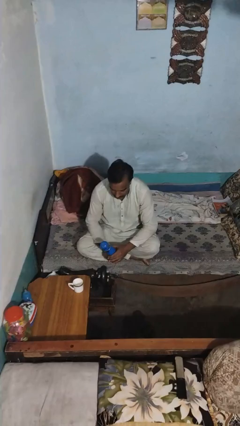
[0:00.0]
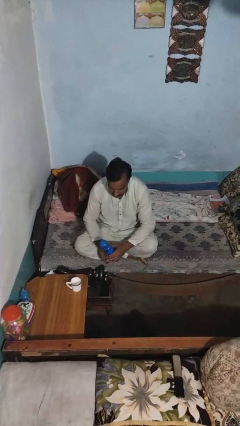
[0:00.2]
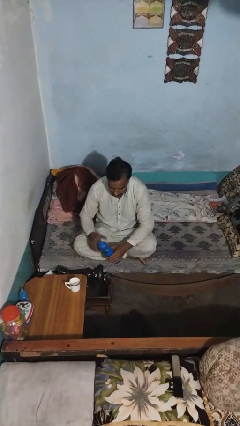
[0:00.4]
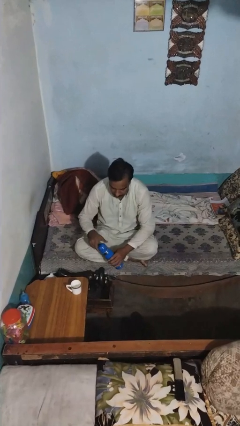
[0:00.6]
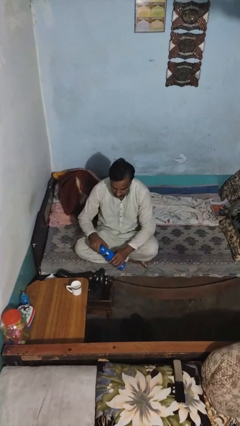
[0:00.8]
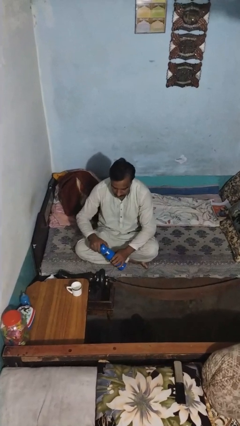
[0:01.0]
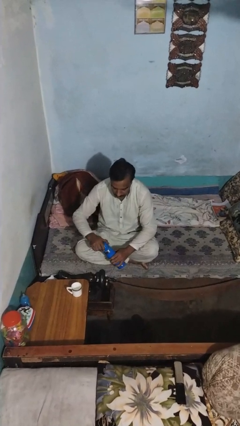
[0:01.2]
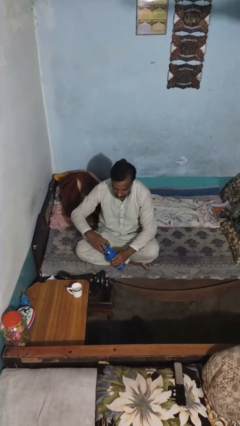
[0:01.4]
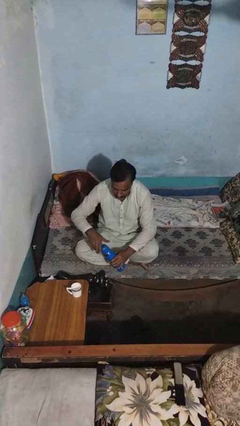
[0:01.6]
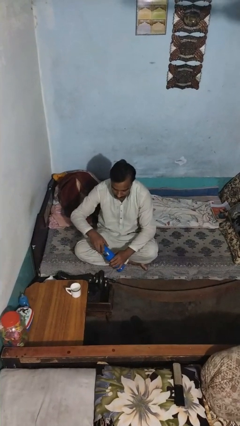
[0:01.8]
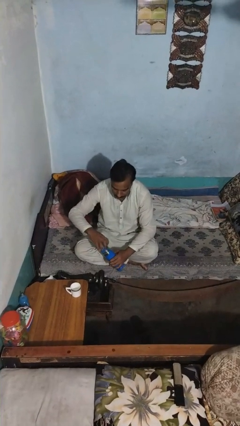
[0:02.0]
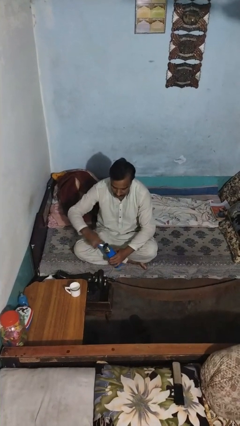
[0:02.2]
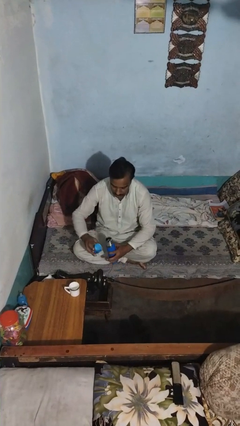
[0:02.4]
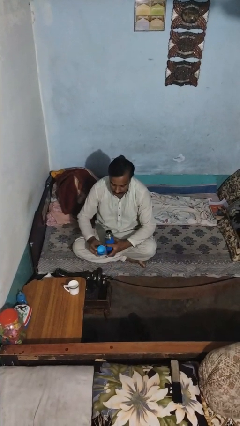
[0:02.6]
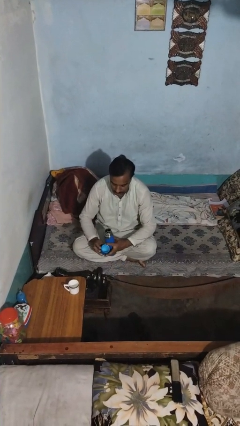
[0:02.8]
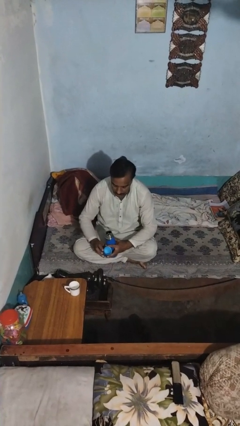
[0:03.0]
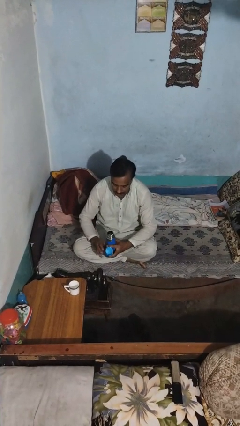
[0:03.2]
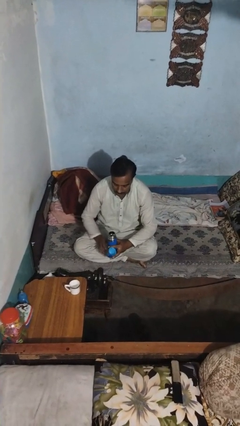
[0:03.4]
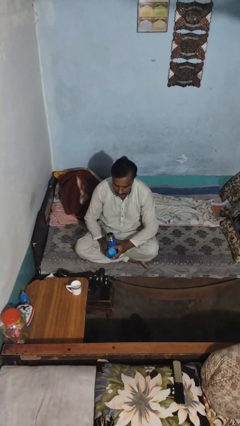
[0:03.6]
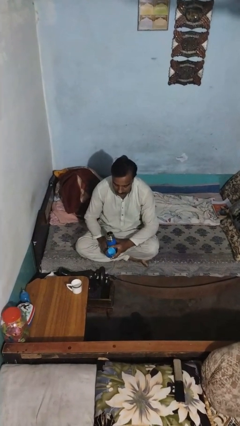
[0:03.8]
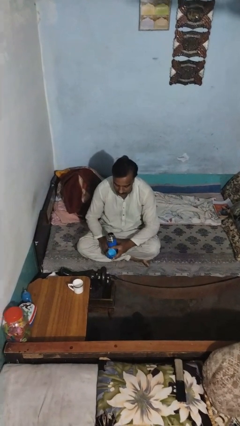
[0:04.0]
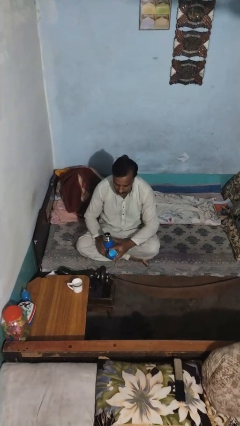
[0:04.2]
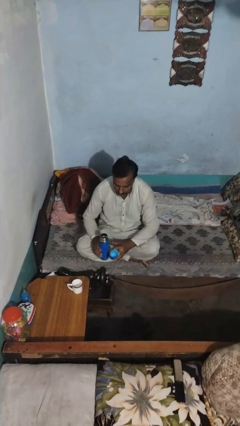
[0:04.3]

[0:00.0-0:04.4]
person unscrews lid from bottle

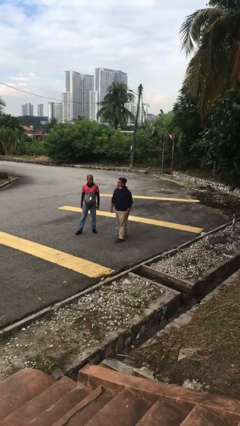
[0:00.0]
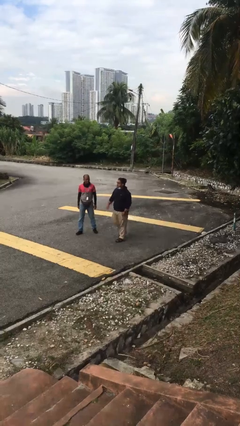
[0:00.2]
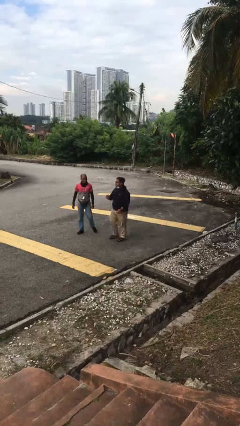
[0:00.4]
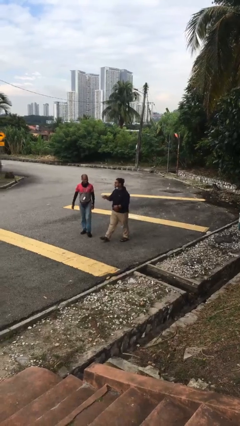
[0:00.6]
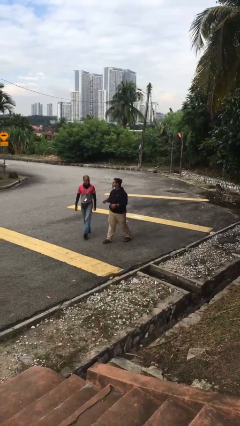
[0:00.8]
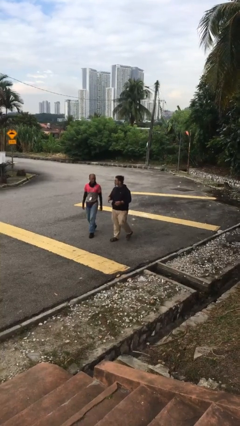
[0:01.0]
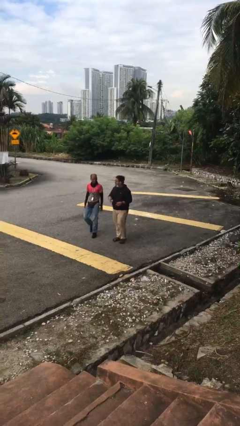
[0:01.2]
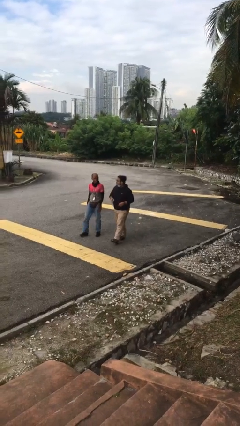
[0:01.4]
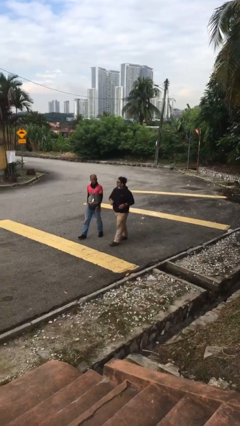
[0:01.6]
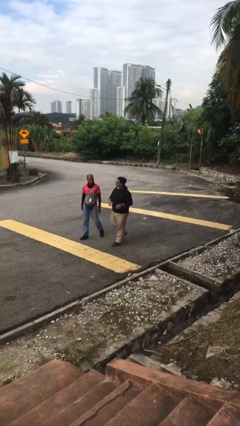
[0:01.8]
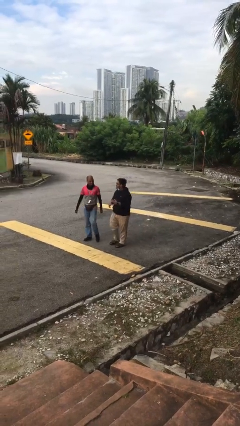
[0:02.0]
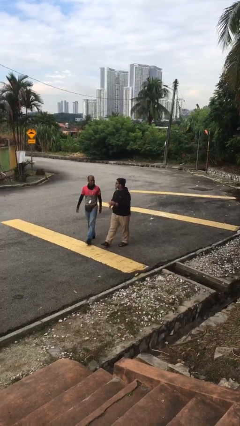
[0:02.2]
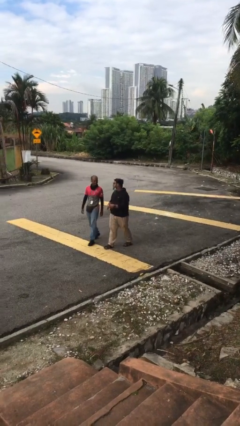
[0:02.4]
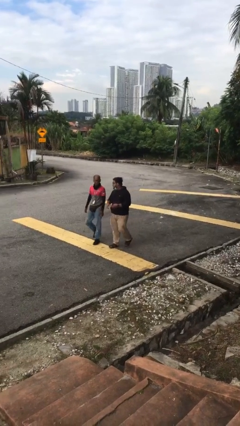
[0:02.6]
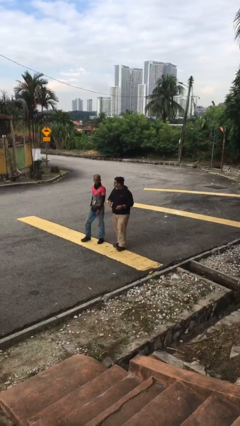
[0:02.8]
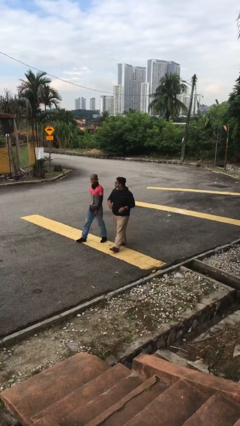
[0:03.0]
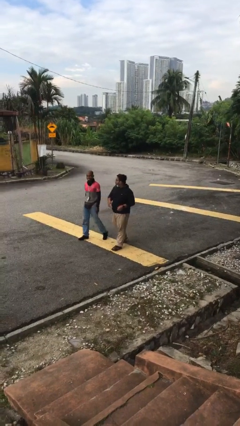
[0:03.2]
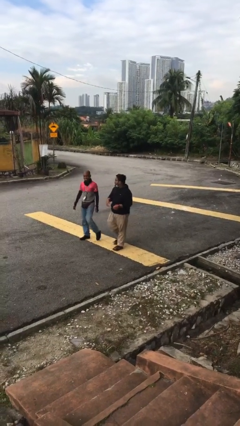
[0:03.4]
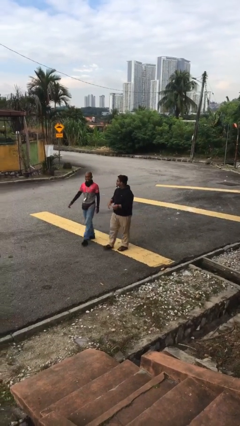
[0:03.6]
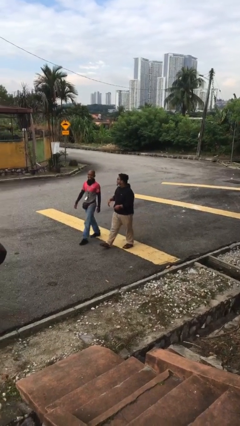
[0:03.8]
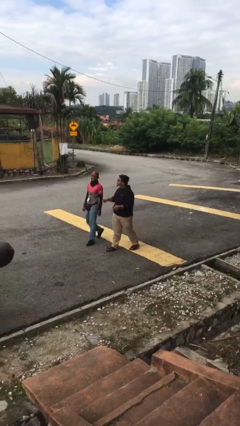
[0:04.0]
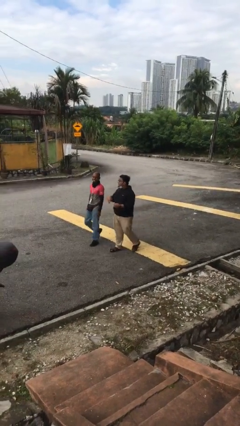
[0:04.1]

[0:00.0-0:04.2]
person talks to person

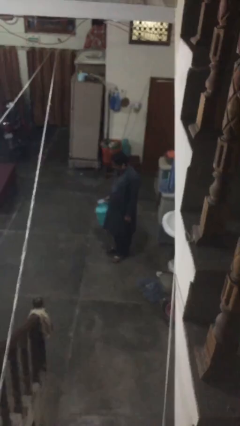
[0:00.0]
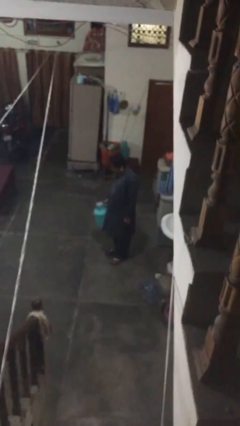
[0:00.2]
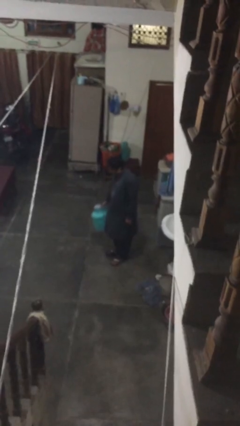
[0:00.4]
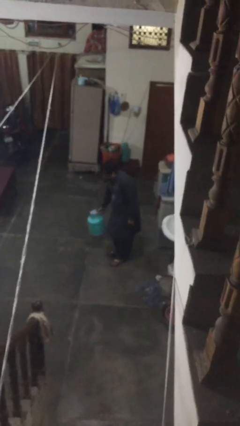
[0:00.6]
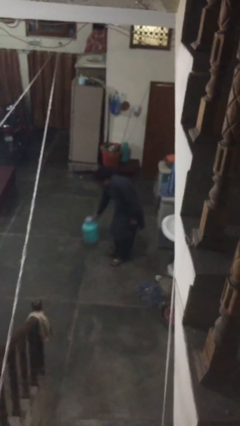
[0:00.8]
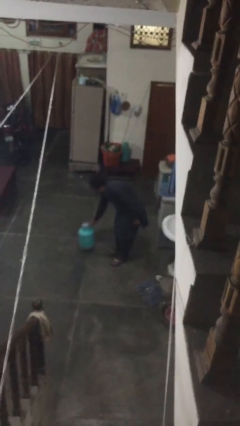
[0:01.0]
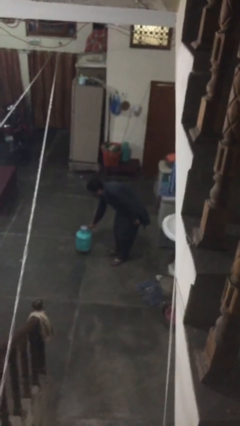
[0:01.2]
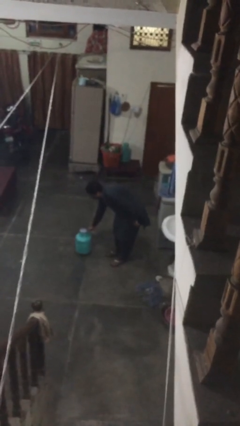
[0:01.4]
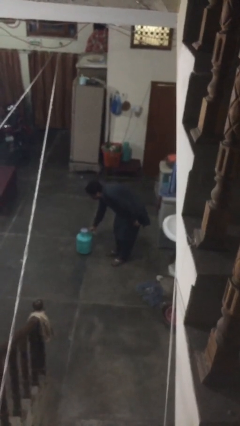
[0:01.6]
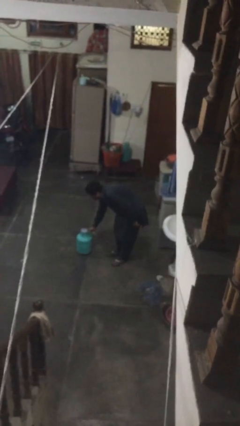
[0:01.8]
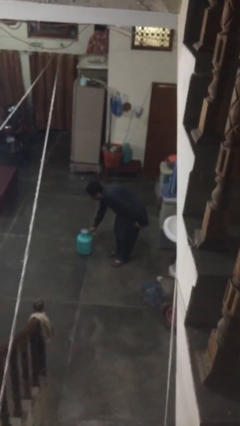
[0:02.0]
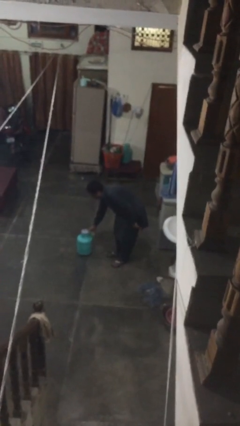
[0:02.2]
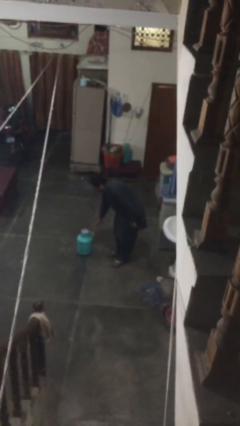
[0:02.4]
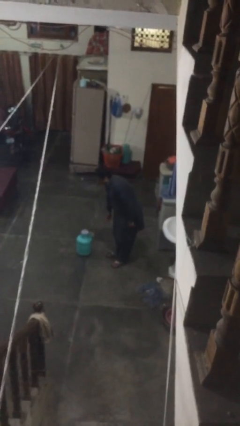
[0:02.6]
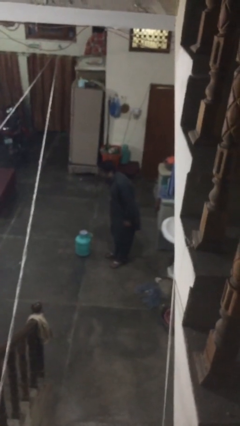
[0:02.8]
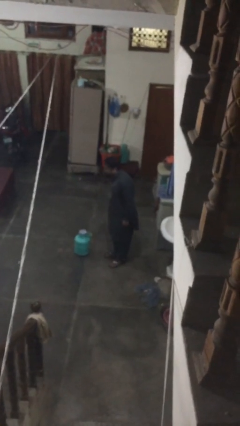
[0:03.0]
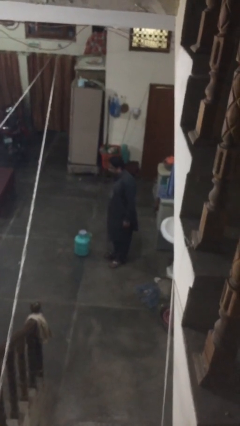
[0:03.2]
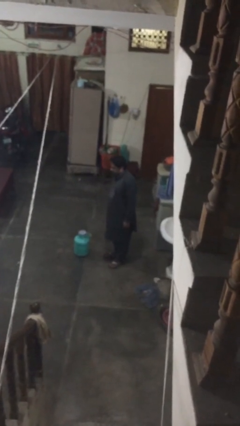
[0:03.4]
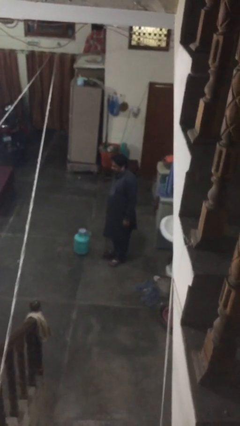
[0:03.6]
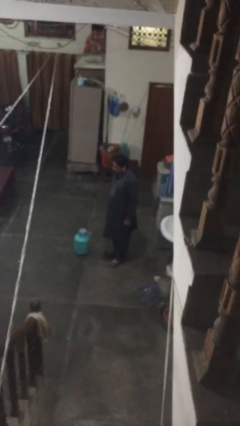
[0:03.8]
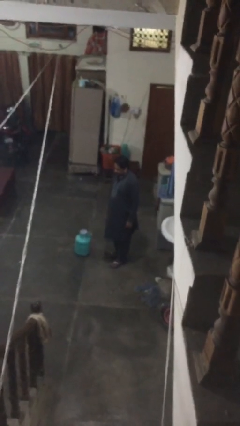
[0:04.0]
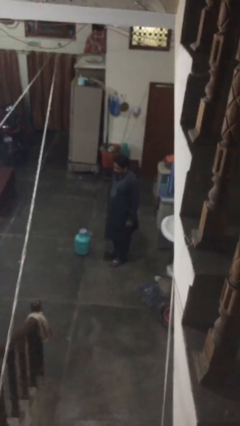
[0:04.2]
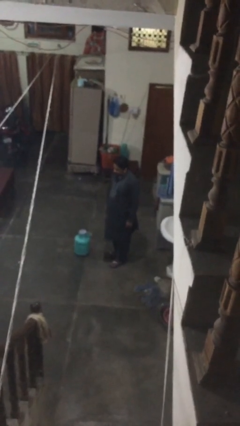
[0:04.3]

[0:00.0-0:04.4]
person puts down object on floor

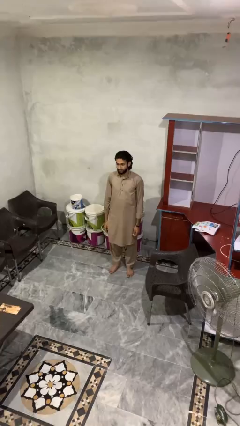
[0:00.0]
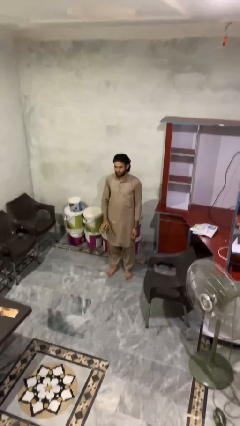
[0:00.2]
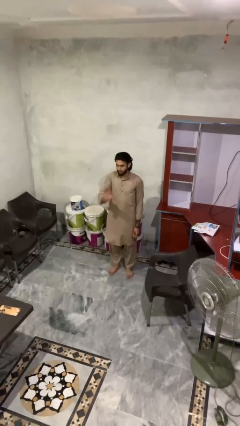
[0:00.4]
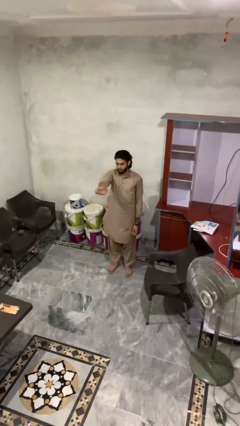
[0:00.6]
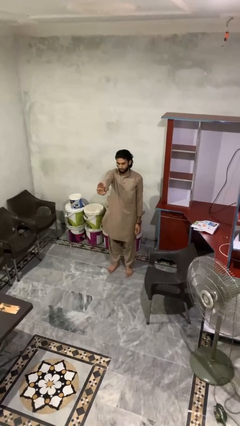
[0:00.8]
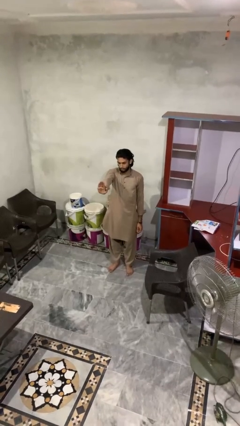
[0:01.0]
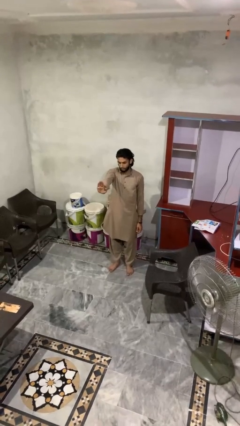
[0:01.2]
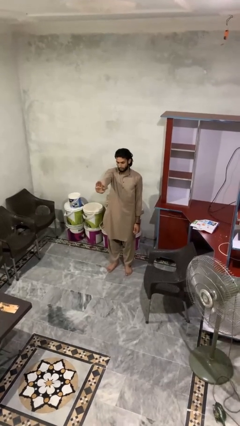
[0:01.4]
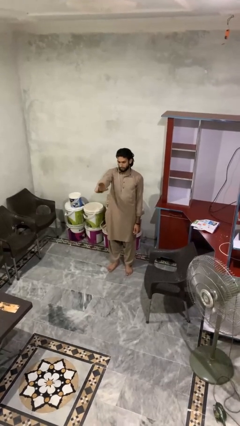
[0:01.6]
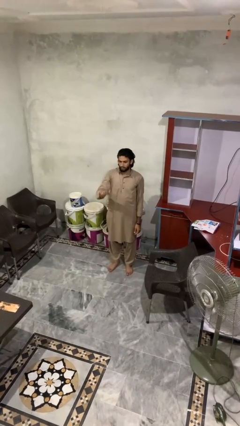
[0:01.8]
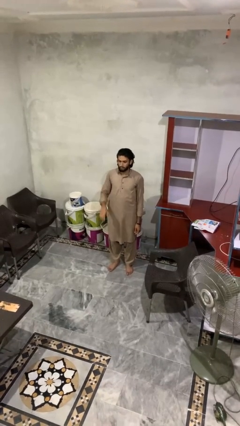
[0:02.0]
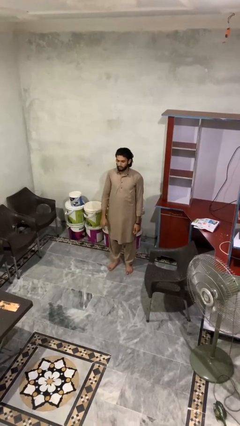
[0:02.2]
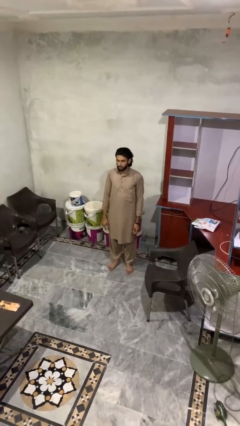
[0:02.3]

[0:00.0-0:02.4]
person gestures stop

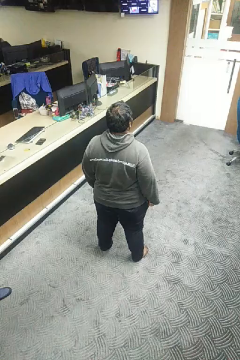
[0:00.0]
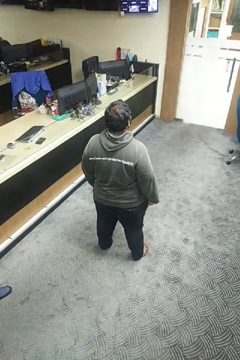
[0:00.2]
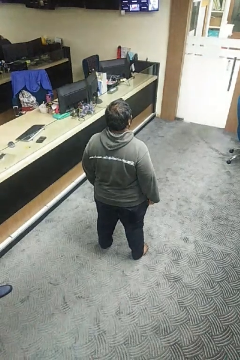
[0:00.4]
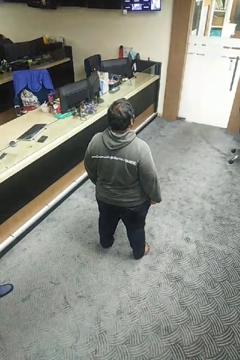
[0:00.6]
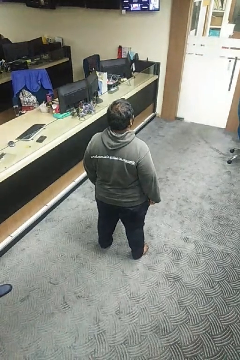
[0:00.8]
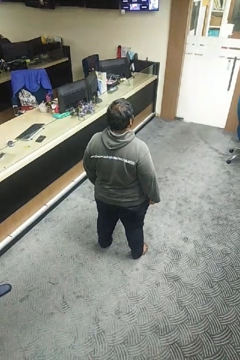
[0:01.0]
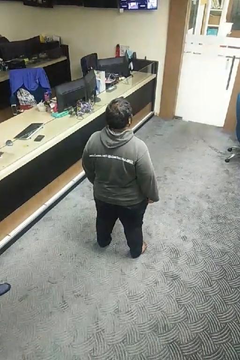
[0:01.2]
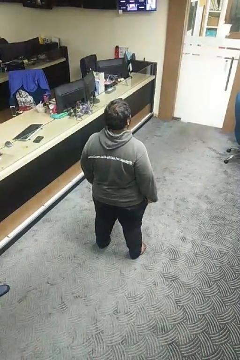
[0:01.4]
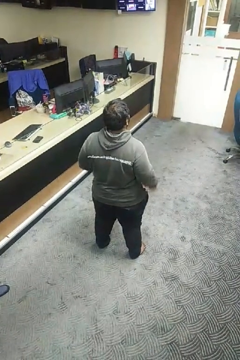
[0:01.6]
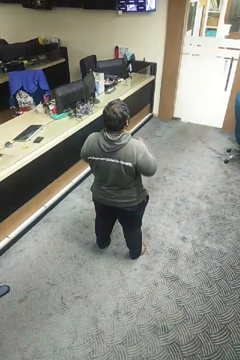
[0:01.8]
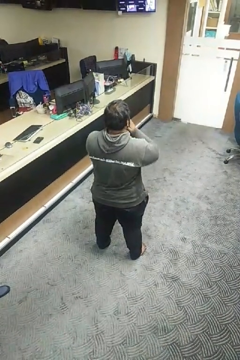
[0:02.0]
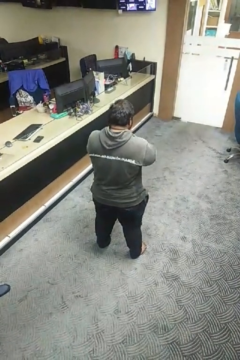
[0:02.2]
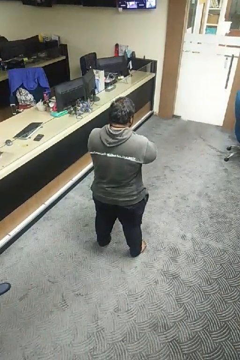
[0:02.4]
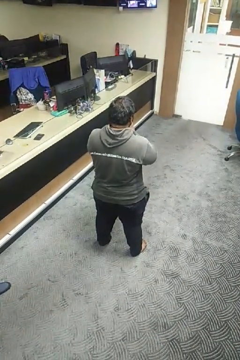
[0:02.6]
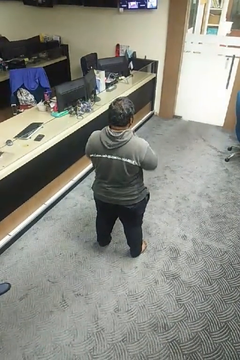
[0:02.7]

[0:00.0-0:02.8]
person sneezes into hand
